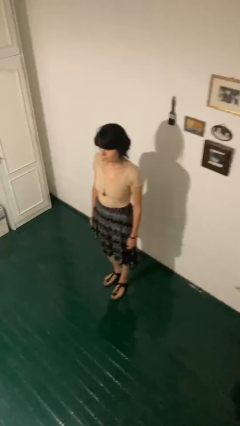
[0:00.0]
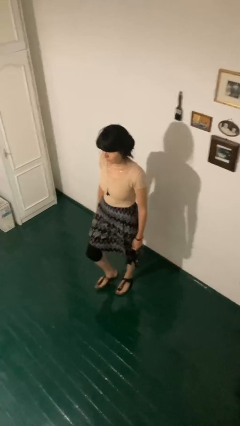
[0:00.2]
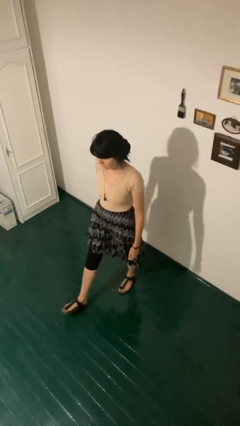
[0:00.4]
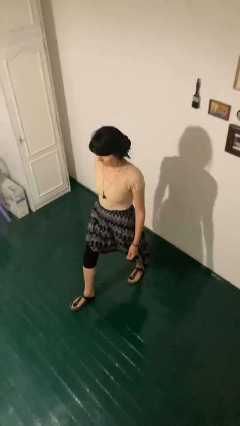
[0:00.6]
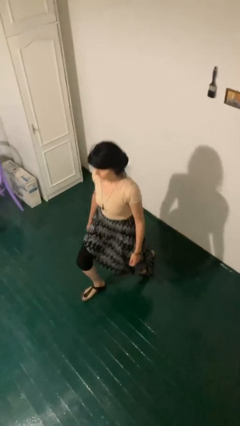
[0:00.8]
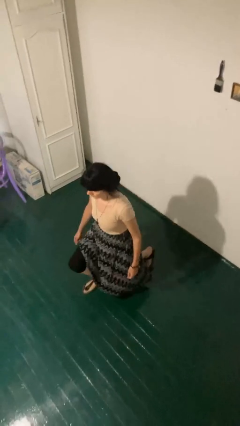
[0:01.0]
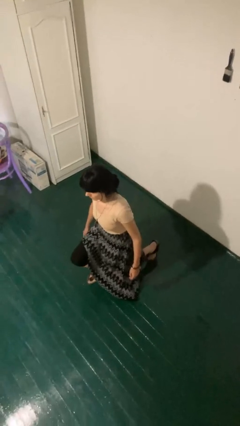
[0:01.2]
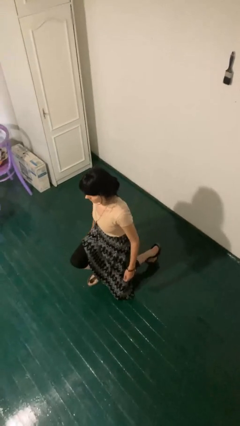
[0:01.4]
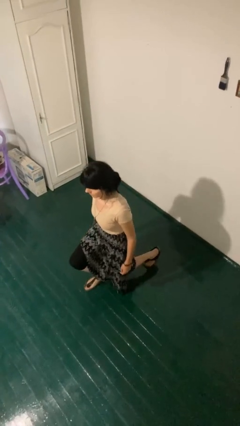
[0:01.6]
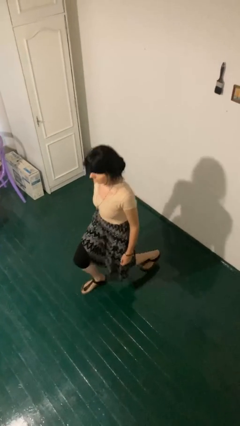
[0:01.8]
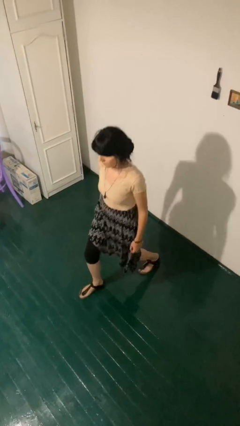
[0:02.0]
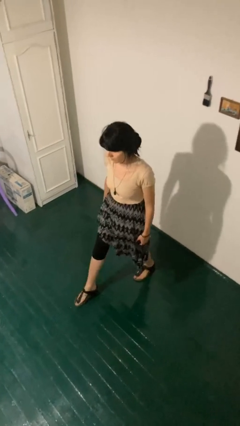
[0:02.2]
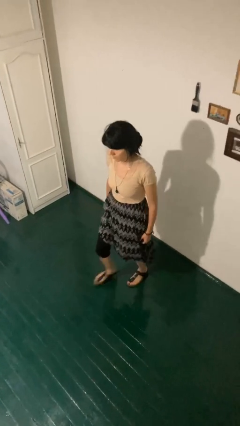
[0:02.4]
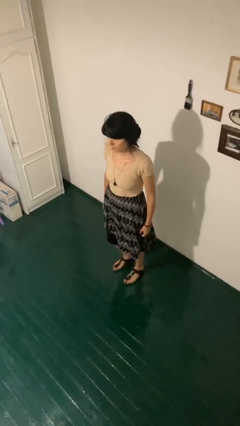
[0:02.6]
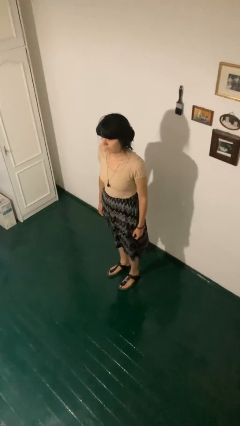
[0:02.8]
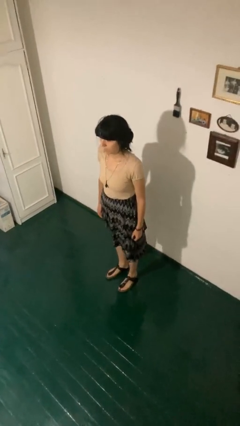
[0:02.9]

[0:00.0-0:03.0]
person exercises with lunges

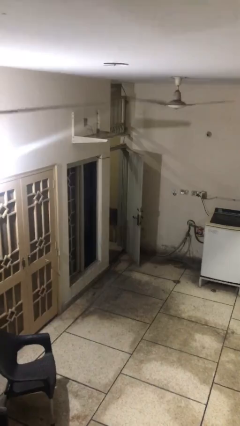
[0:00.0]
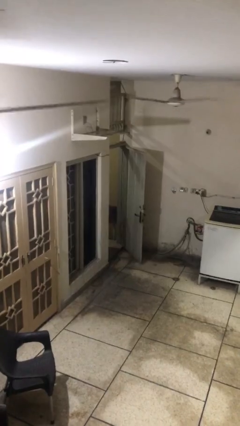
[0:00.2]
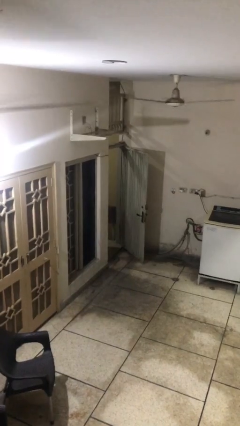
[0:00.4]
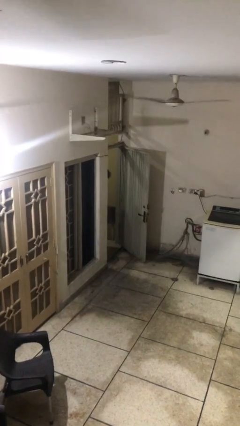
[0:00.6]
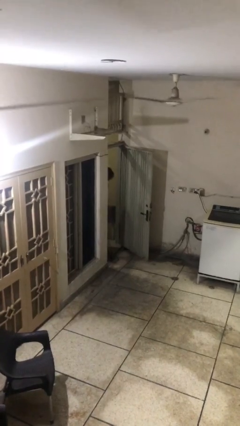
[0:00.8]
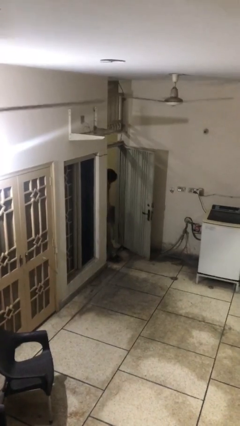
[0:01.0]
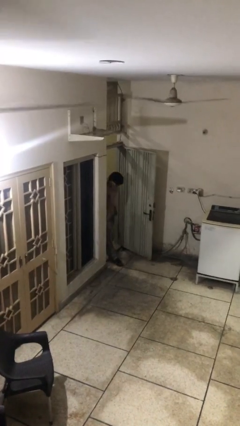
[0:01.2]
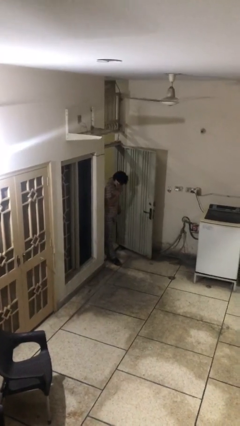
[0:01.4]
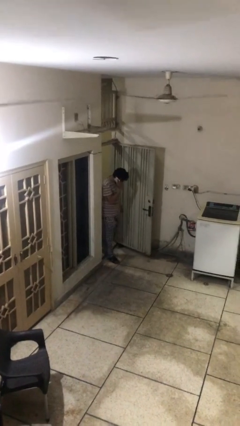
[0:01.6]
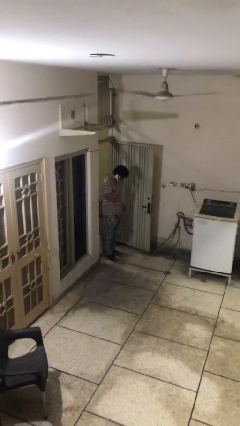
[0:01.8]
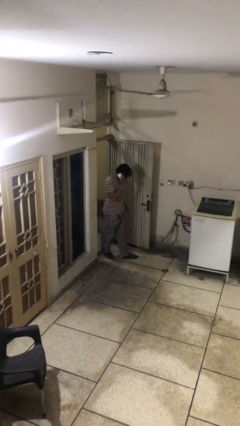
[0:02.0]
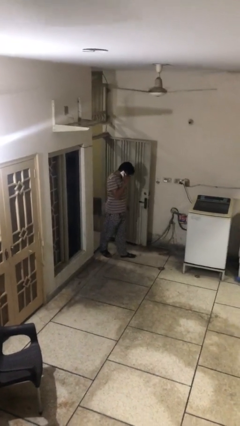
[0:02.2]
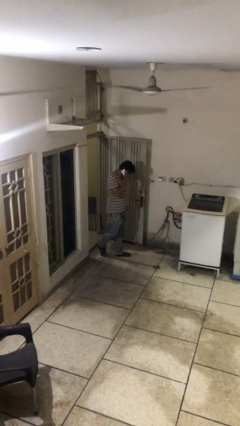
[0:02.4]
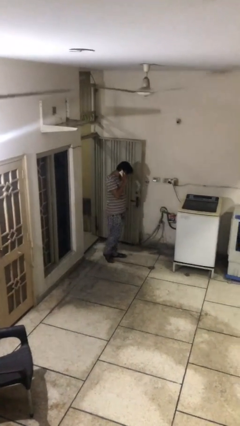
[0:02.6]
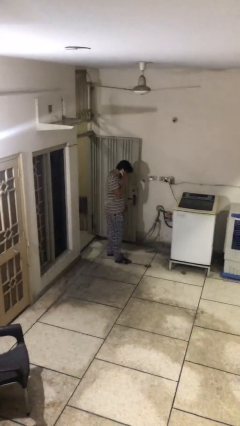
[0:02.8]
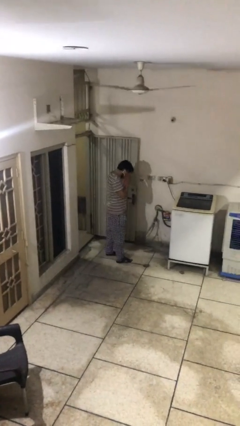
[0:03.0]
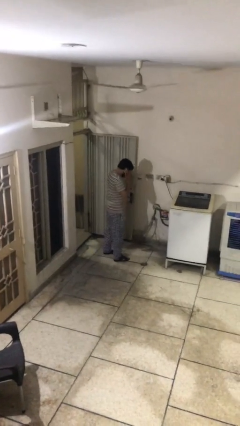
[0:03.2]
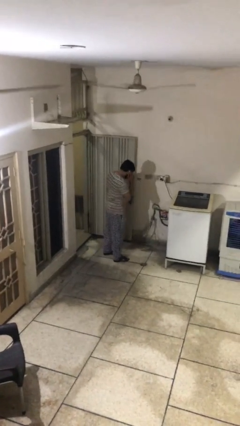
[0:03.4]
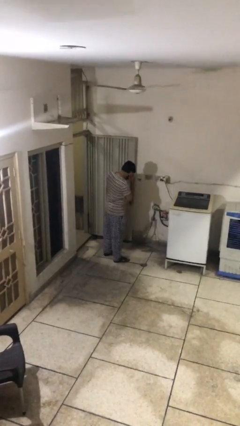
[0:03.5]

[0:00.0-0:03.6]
person enters scene through structure

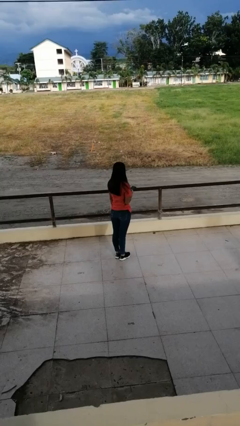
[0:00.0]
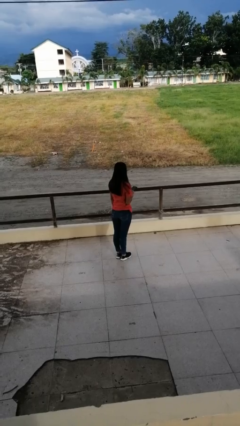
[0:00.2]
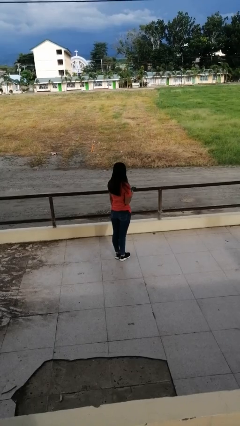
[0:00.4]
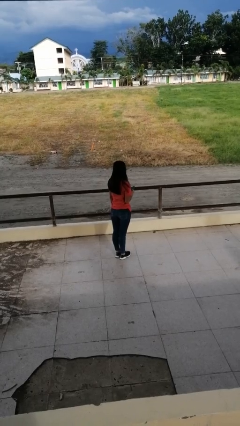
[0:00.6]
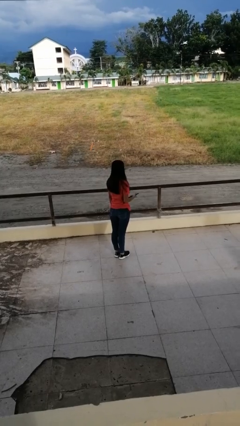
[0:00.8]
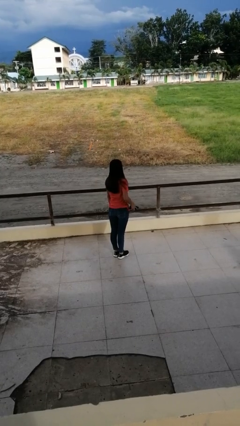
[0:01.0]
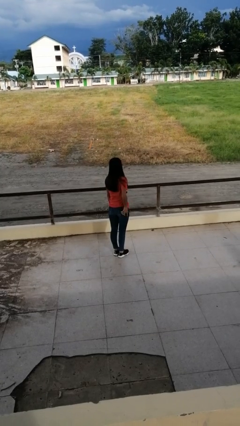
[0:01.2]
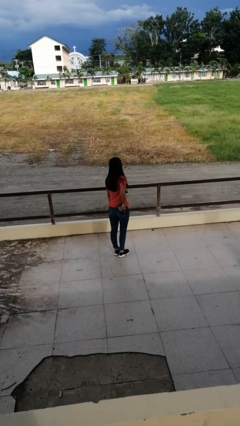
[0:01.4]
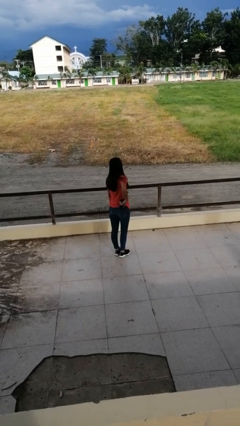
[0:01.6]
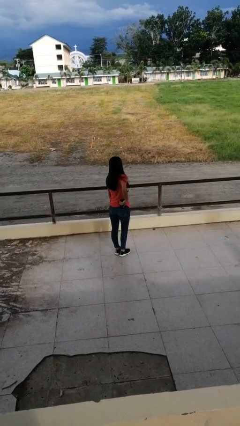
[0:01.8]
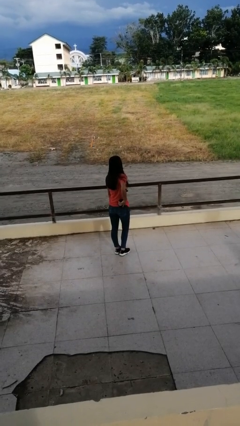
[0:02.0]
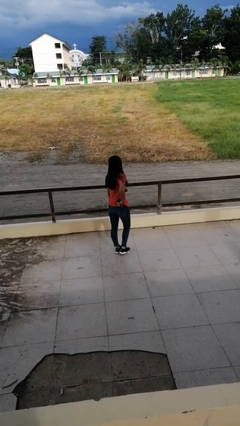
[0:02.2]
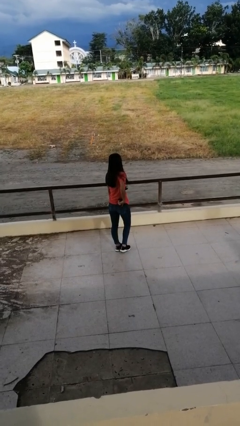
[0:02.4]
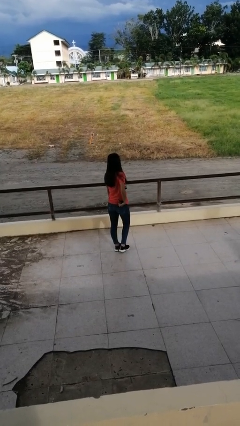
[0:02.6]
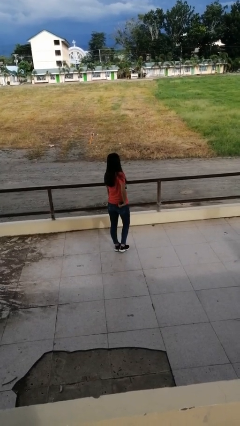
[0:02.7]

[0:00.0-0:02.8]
person puts phone into pocket

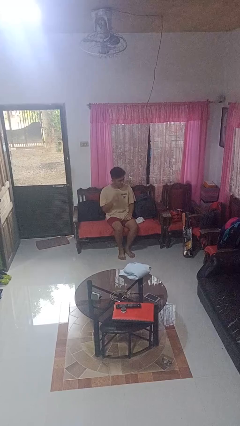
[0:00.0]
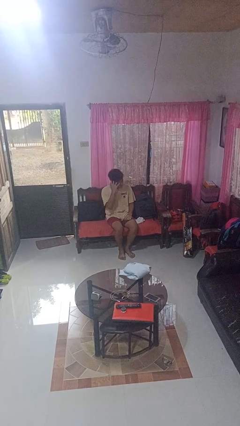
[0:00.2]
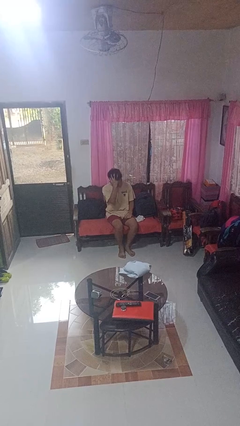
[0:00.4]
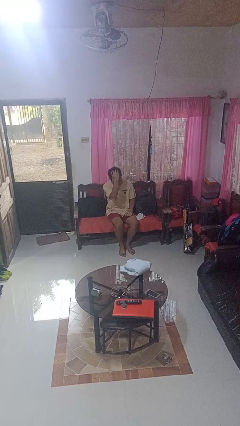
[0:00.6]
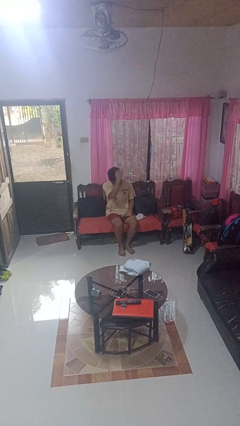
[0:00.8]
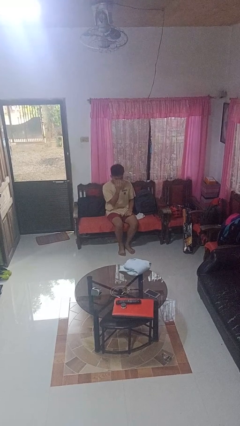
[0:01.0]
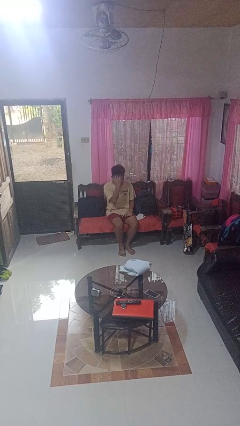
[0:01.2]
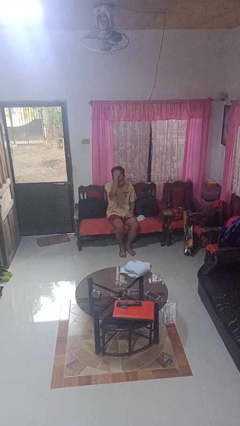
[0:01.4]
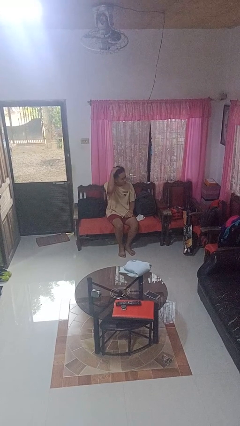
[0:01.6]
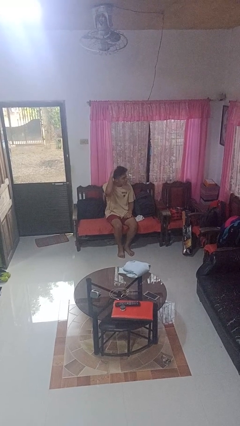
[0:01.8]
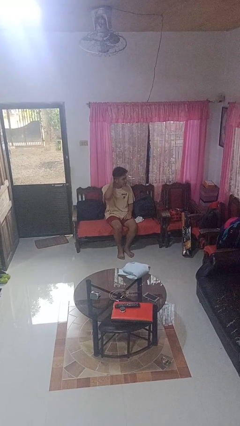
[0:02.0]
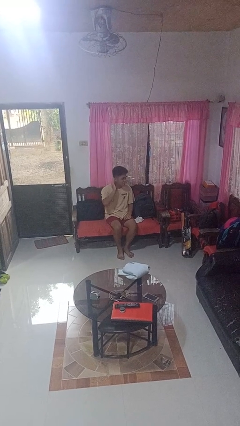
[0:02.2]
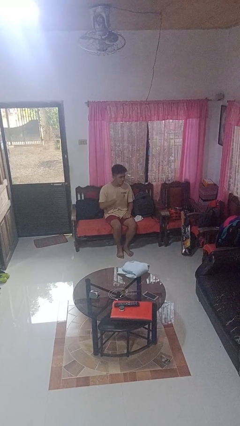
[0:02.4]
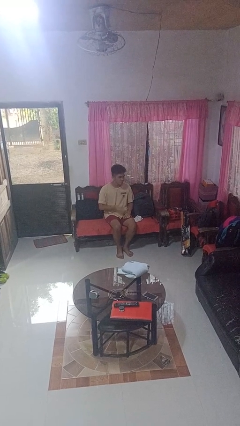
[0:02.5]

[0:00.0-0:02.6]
person strokes hair

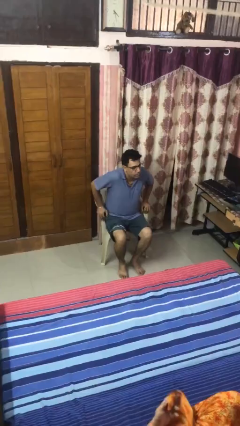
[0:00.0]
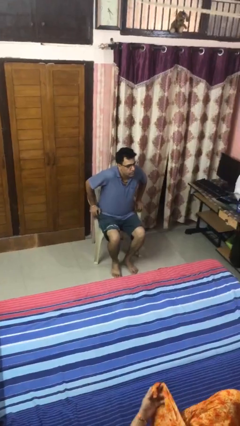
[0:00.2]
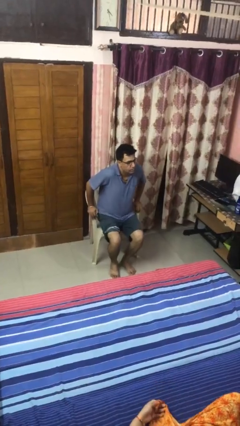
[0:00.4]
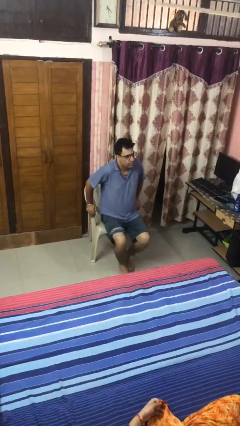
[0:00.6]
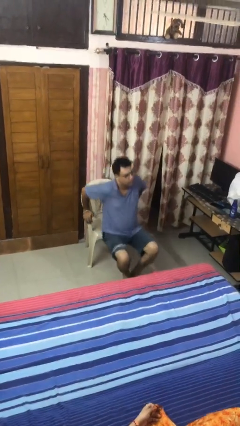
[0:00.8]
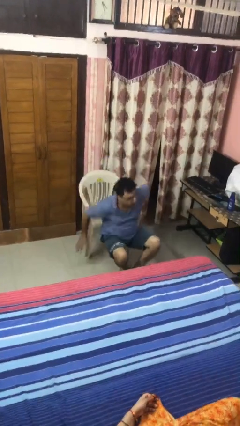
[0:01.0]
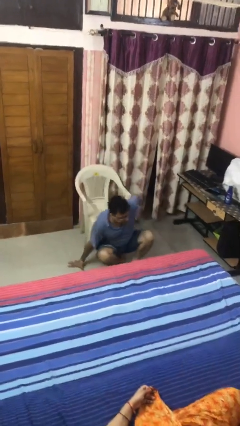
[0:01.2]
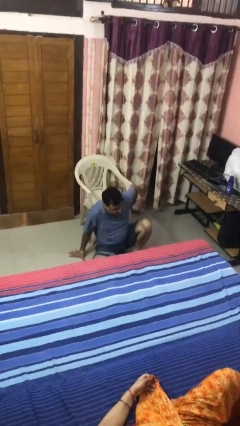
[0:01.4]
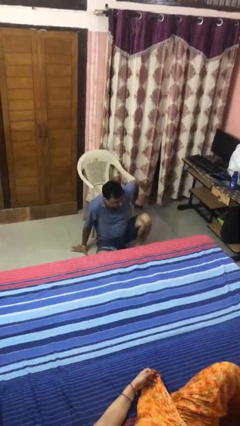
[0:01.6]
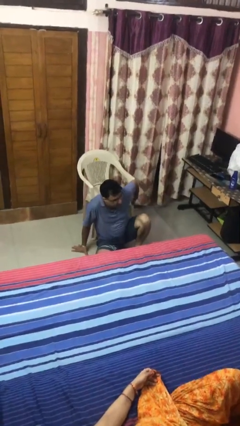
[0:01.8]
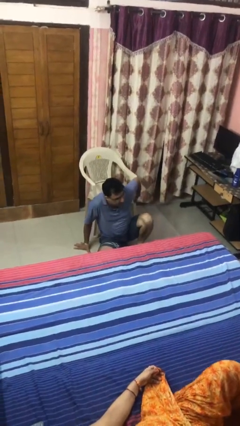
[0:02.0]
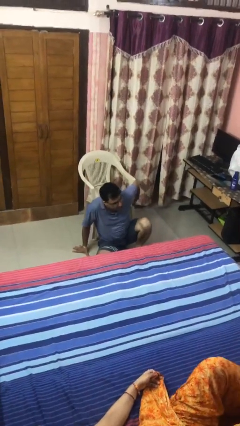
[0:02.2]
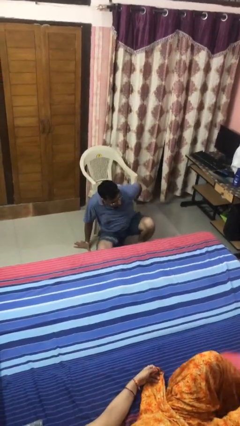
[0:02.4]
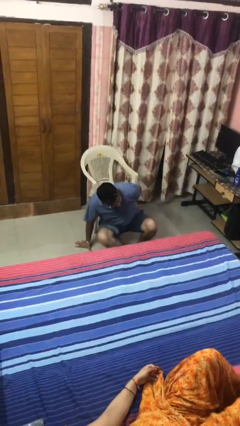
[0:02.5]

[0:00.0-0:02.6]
person falls from chair

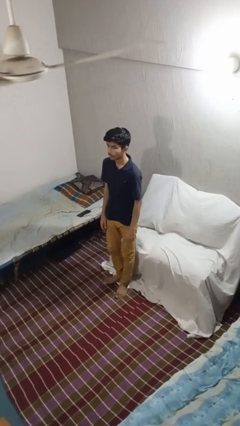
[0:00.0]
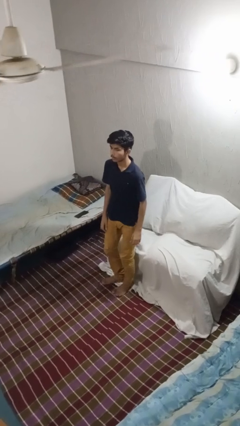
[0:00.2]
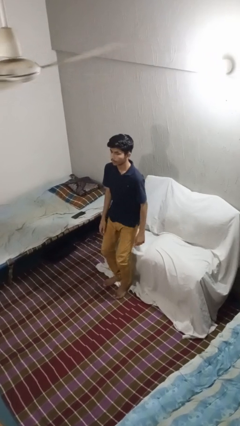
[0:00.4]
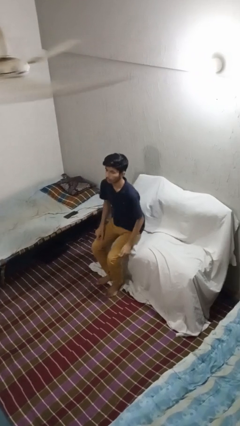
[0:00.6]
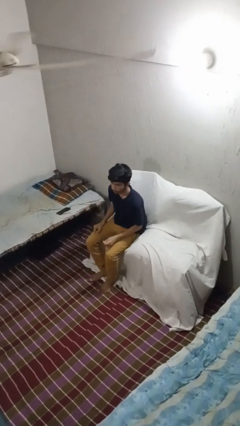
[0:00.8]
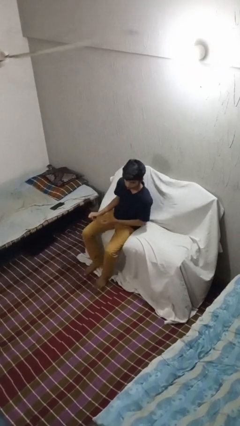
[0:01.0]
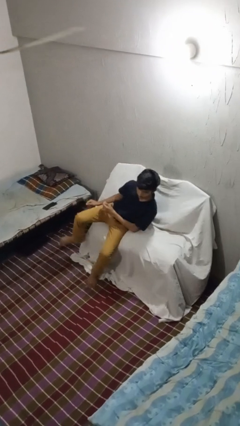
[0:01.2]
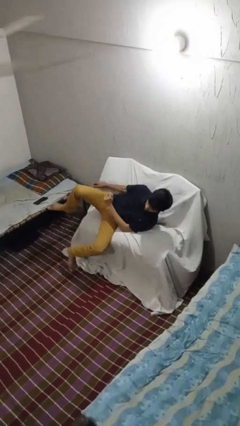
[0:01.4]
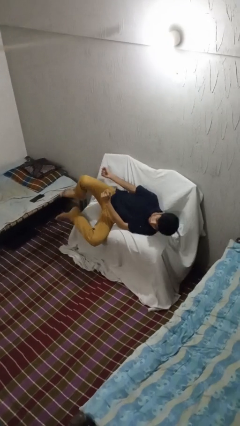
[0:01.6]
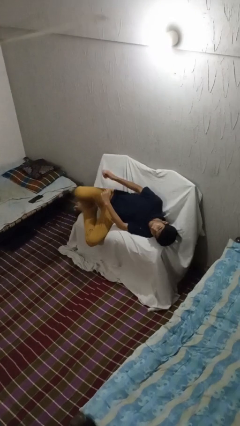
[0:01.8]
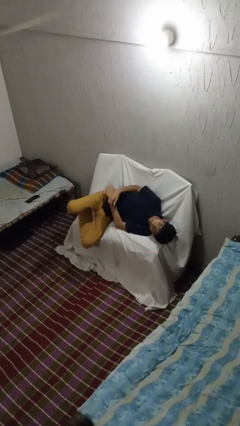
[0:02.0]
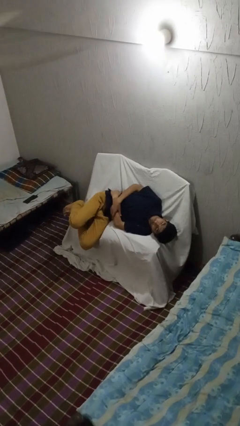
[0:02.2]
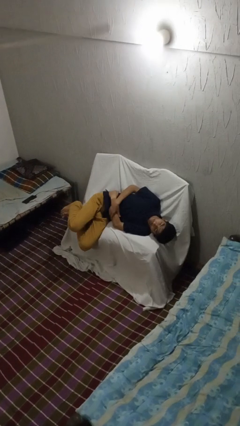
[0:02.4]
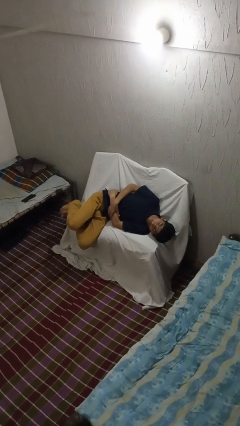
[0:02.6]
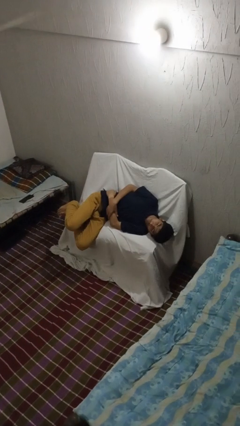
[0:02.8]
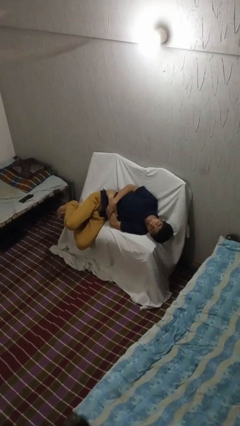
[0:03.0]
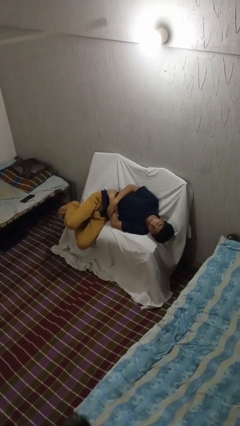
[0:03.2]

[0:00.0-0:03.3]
person lies down on couch
